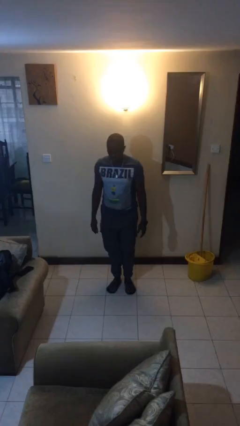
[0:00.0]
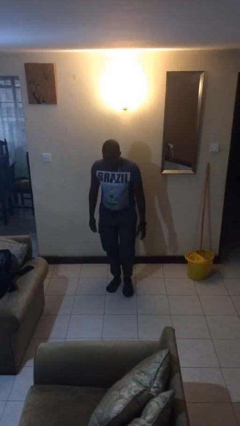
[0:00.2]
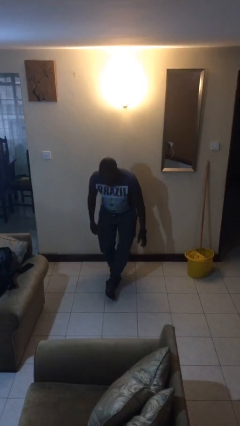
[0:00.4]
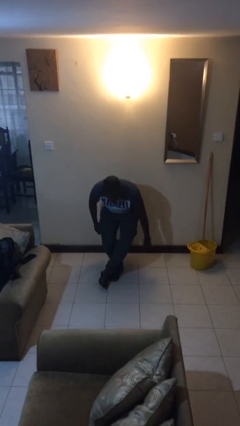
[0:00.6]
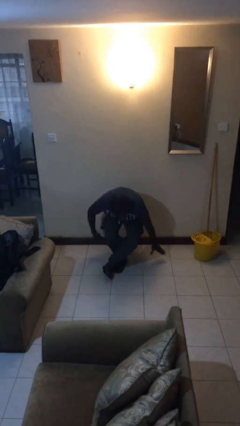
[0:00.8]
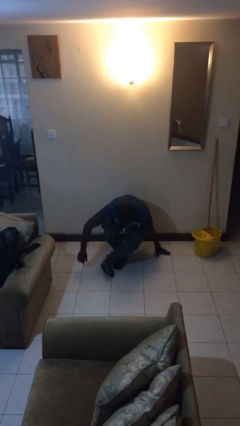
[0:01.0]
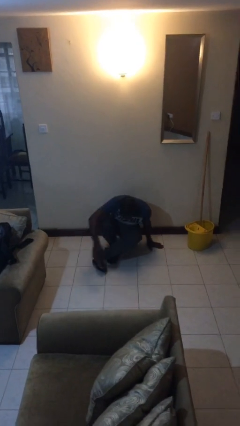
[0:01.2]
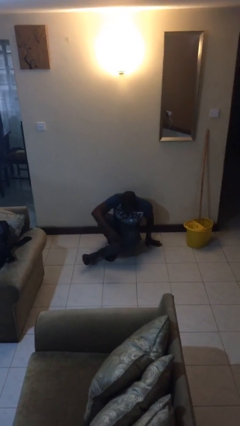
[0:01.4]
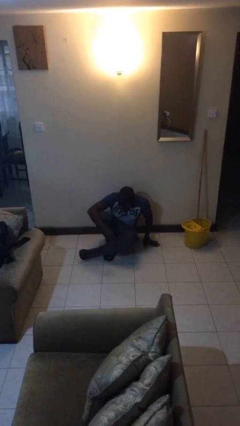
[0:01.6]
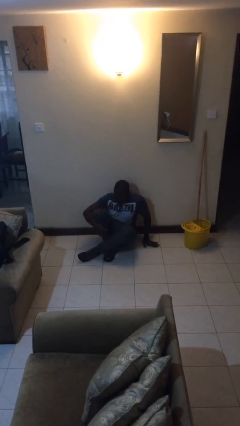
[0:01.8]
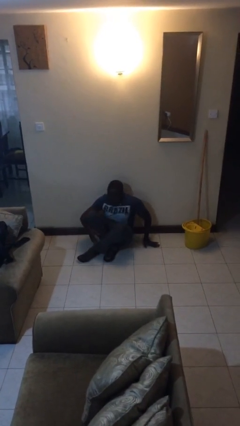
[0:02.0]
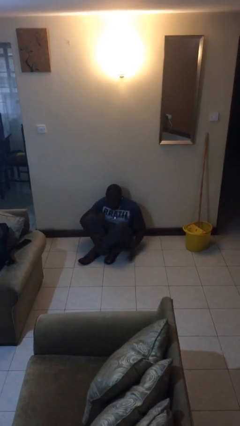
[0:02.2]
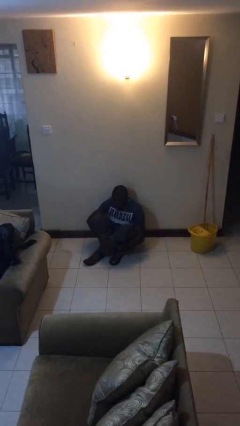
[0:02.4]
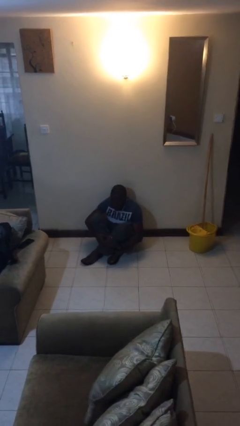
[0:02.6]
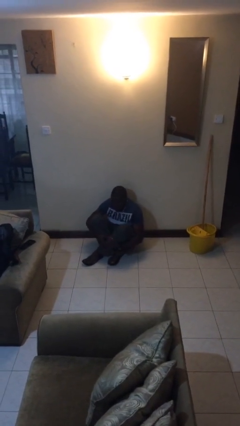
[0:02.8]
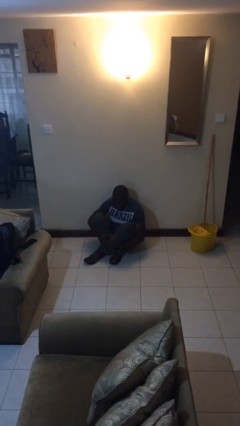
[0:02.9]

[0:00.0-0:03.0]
person sits crisscross

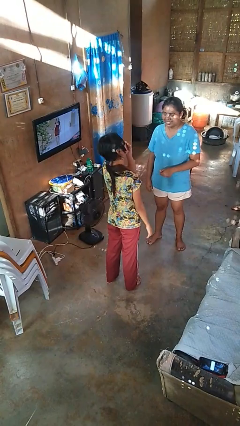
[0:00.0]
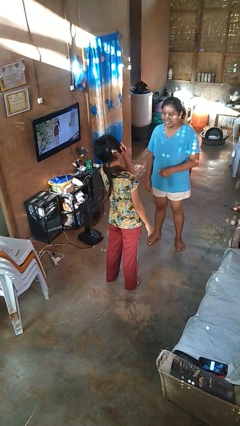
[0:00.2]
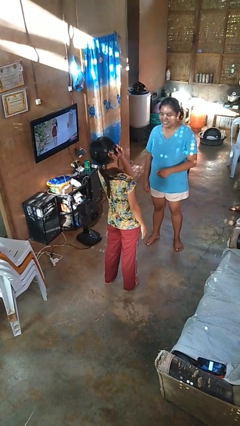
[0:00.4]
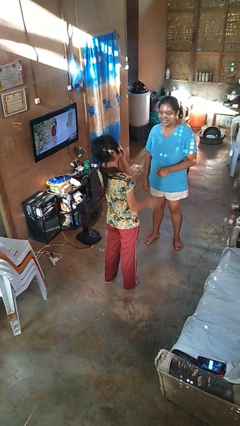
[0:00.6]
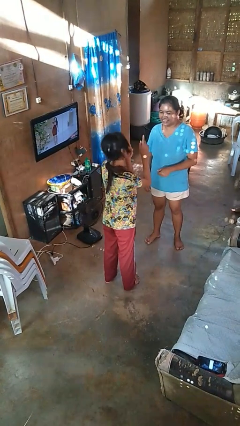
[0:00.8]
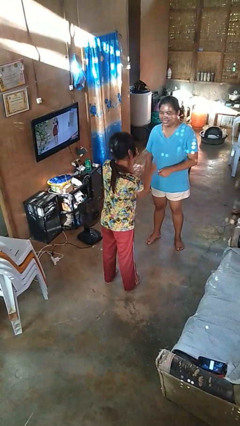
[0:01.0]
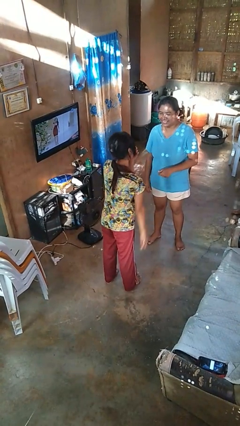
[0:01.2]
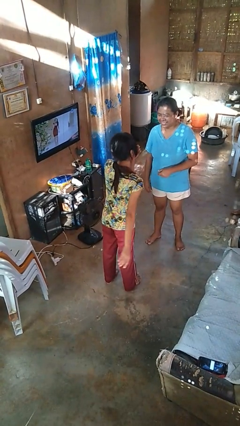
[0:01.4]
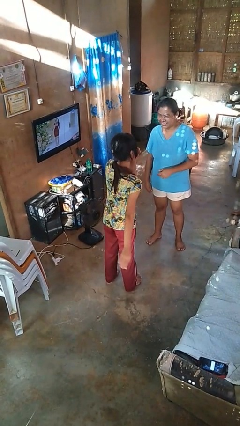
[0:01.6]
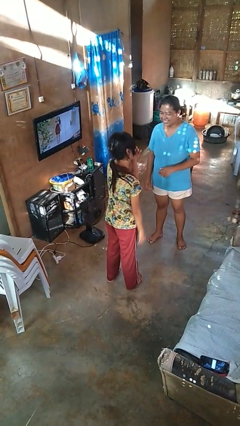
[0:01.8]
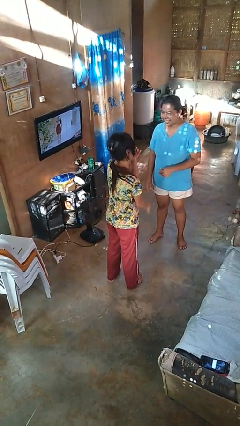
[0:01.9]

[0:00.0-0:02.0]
person laughs with person

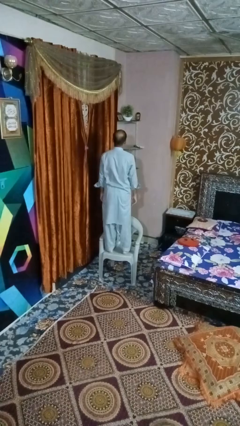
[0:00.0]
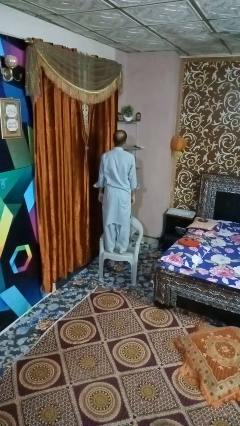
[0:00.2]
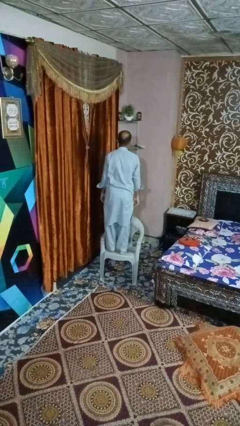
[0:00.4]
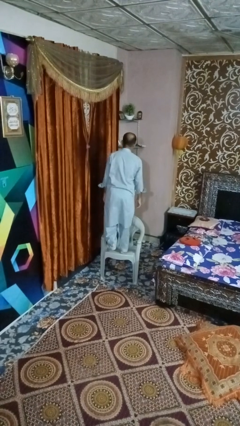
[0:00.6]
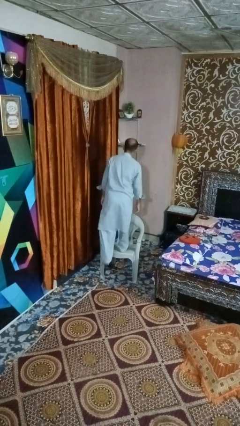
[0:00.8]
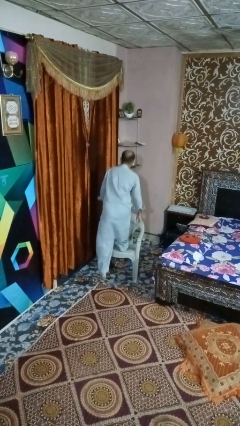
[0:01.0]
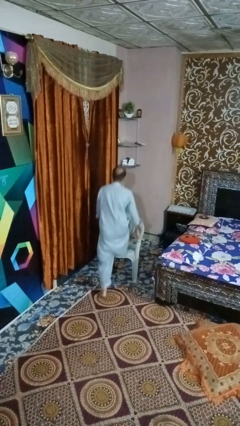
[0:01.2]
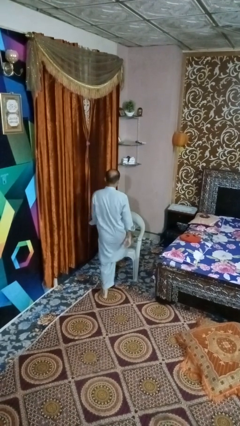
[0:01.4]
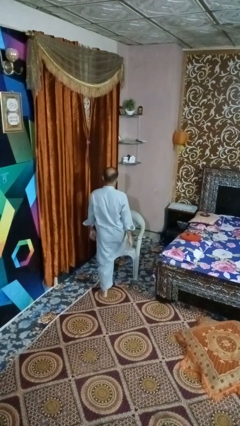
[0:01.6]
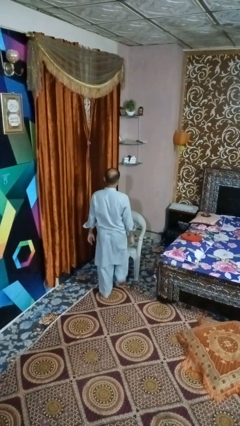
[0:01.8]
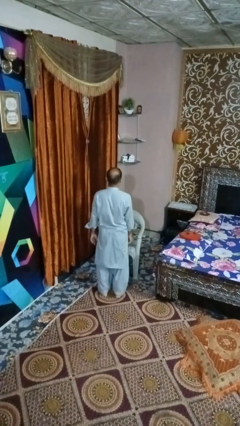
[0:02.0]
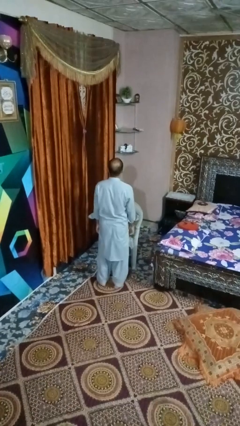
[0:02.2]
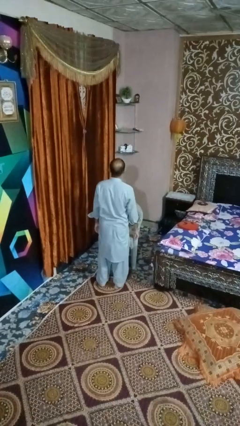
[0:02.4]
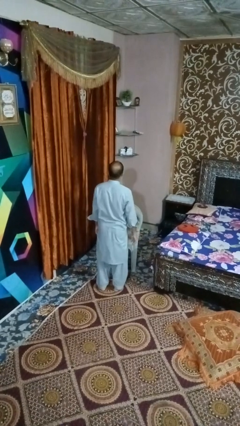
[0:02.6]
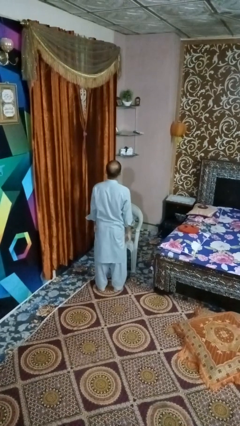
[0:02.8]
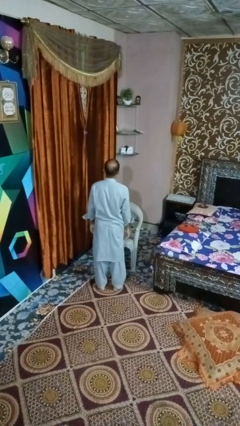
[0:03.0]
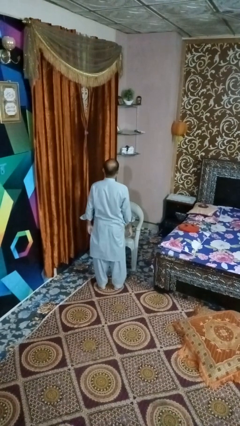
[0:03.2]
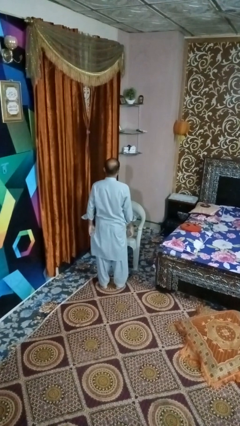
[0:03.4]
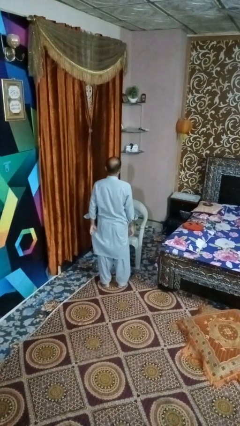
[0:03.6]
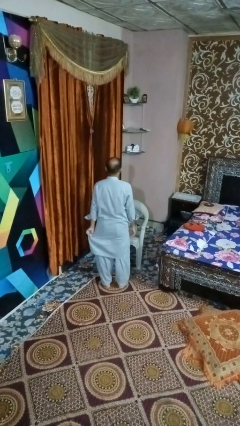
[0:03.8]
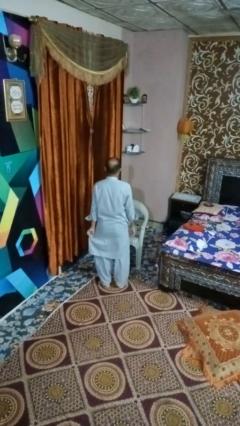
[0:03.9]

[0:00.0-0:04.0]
person climbs off chair

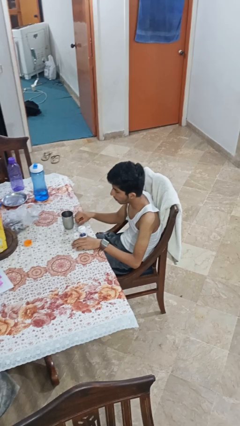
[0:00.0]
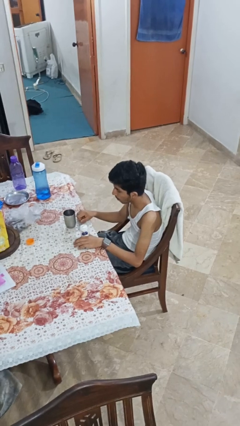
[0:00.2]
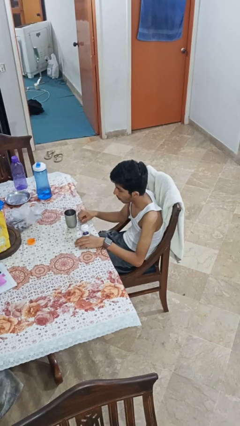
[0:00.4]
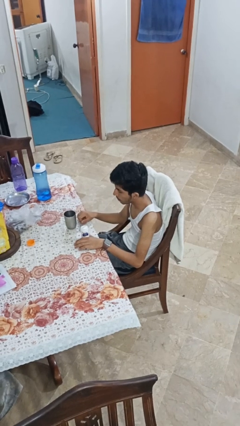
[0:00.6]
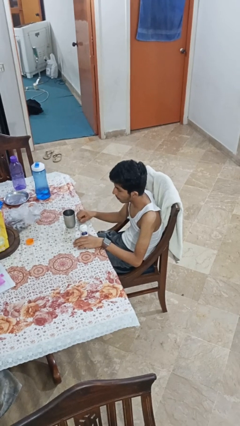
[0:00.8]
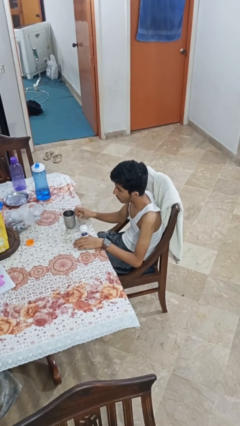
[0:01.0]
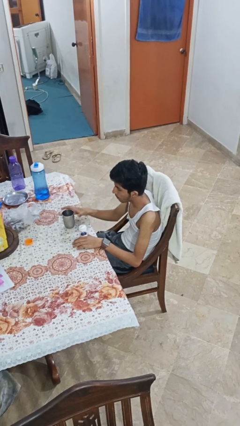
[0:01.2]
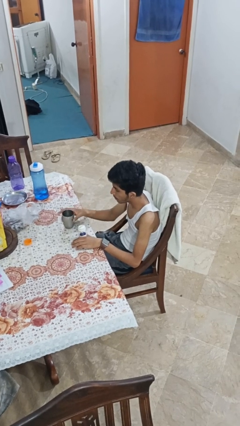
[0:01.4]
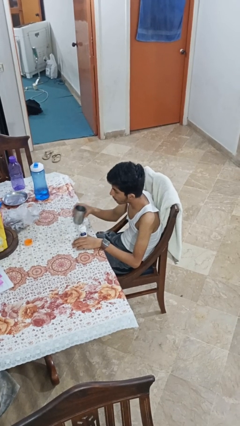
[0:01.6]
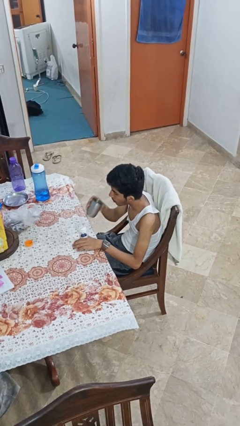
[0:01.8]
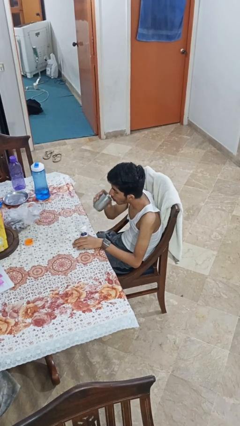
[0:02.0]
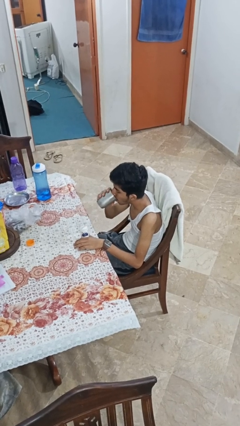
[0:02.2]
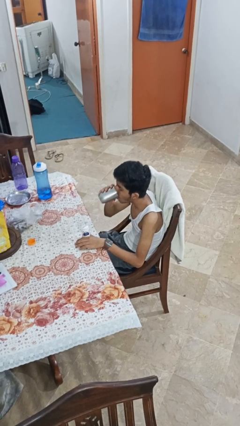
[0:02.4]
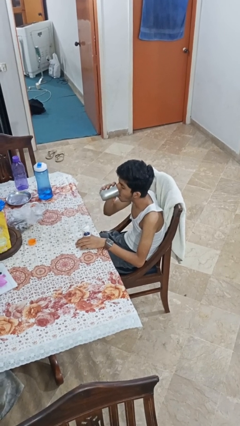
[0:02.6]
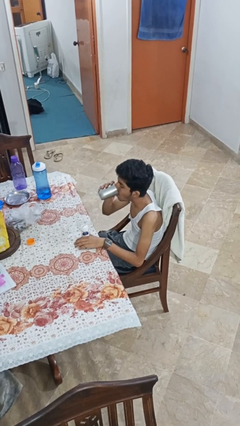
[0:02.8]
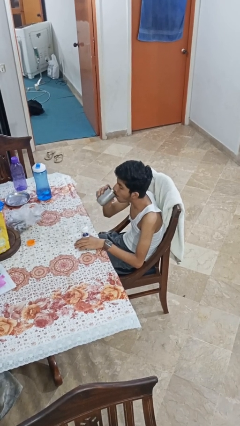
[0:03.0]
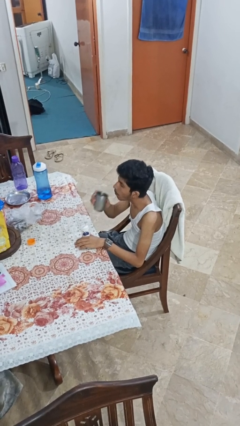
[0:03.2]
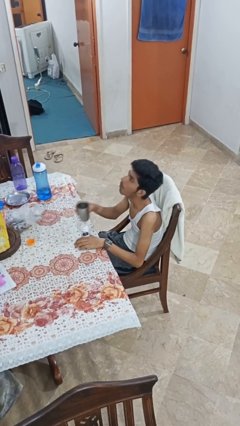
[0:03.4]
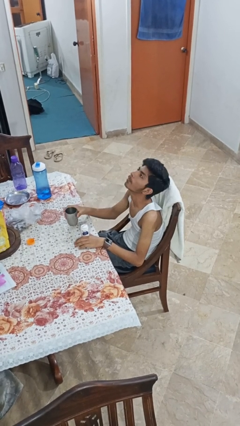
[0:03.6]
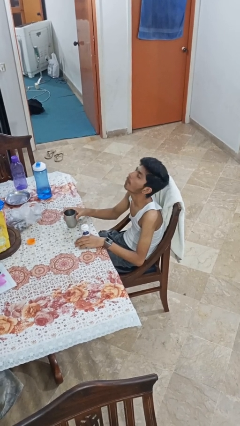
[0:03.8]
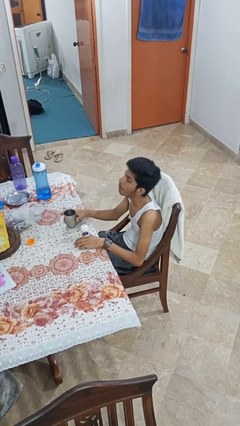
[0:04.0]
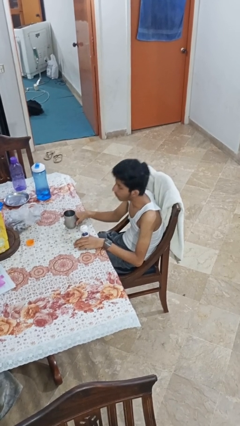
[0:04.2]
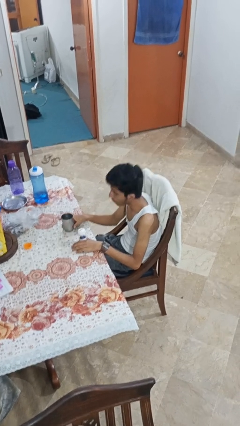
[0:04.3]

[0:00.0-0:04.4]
person drinks from cup

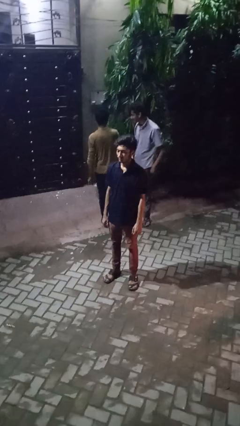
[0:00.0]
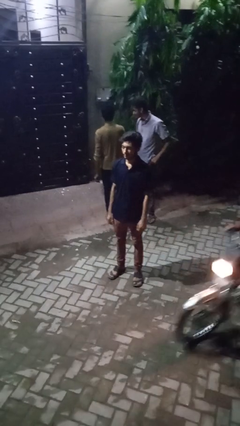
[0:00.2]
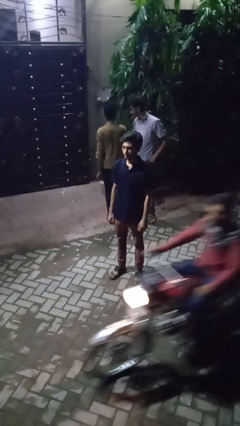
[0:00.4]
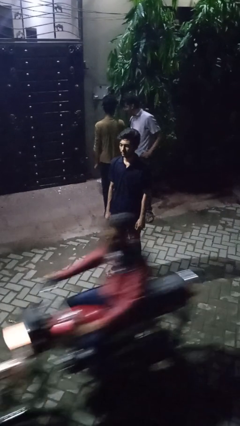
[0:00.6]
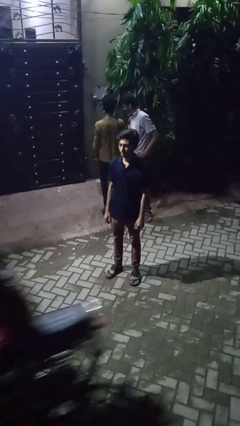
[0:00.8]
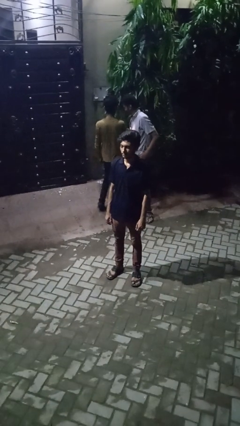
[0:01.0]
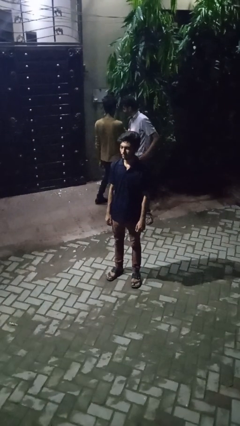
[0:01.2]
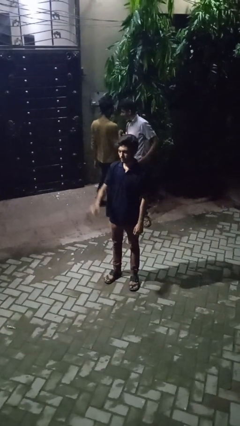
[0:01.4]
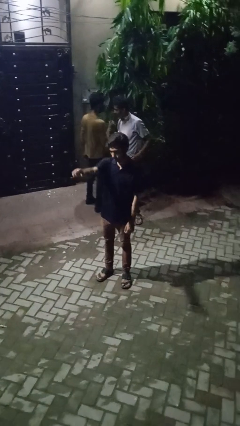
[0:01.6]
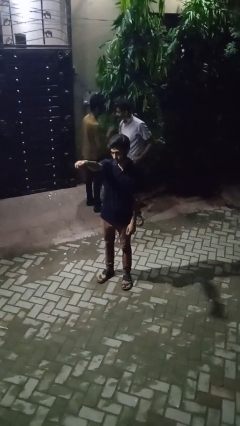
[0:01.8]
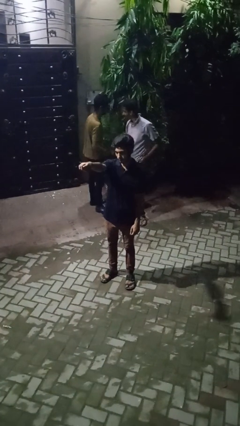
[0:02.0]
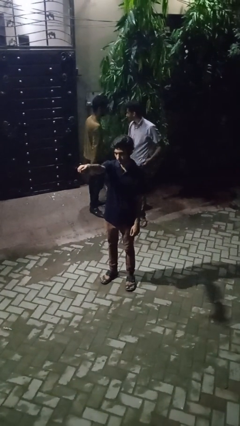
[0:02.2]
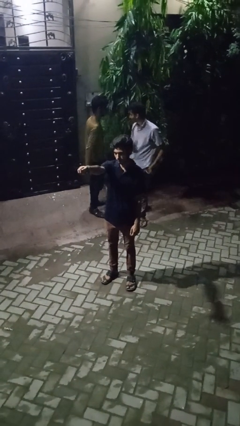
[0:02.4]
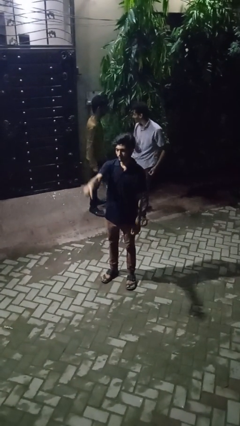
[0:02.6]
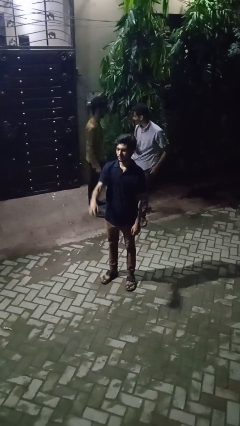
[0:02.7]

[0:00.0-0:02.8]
person points at person

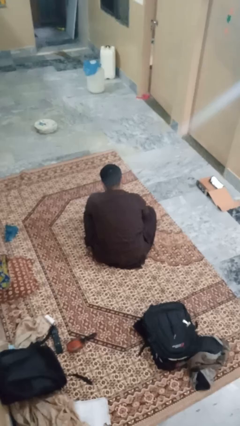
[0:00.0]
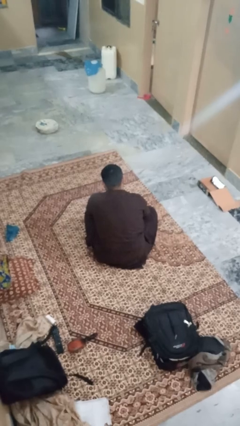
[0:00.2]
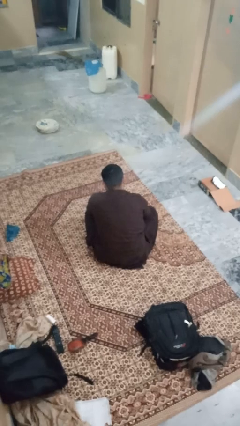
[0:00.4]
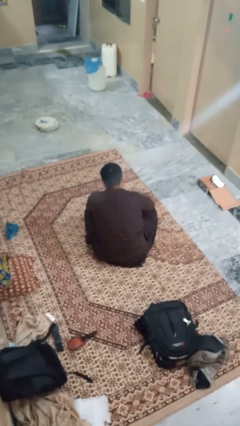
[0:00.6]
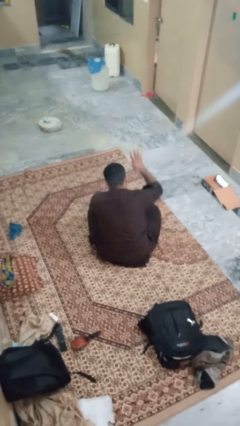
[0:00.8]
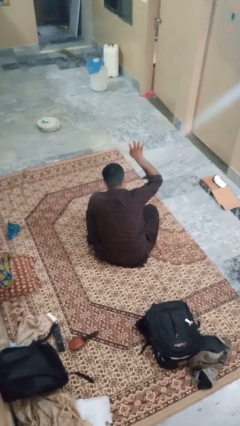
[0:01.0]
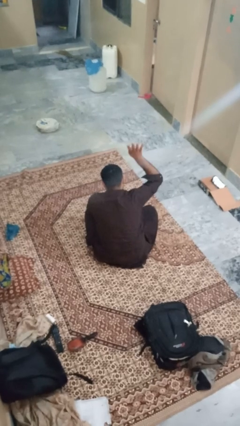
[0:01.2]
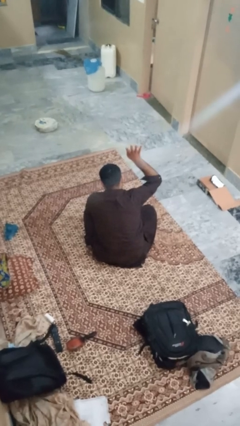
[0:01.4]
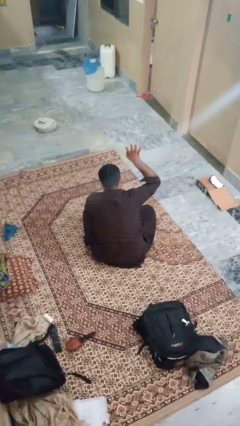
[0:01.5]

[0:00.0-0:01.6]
person gestures number four
